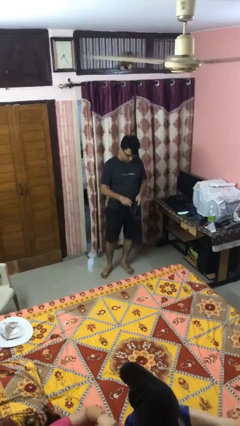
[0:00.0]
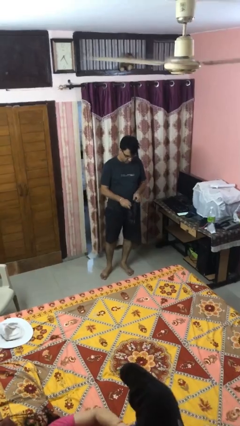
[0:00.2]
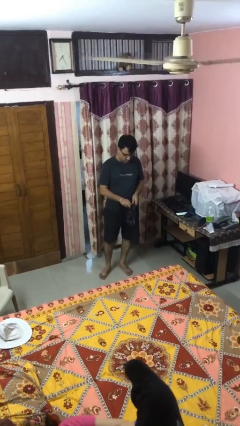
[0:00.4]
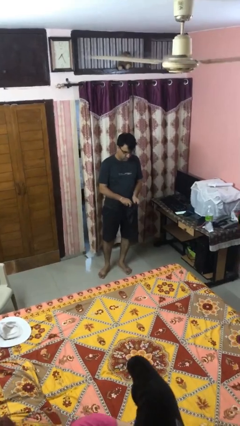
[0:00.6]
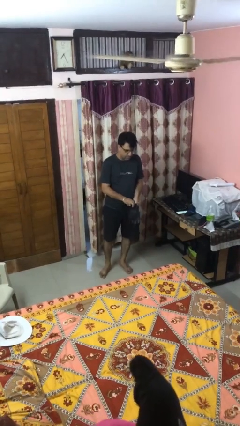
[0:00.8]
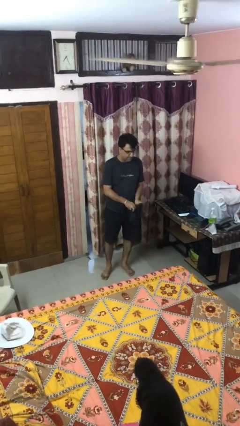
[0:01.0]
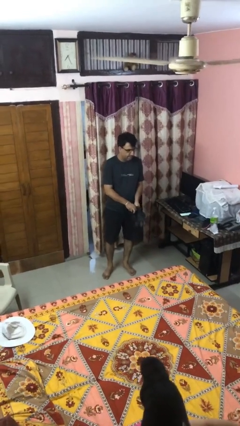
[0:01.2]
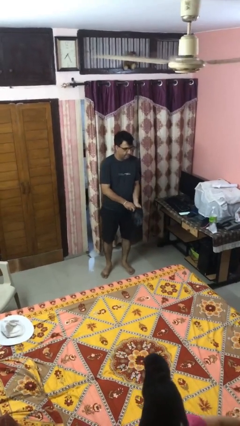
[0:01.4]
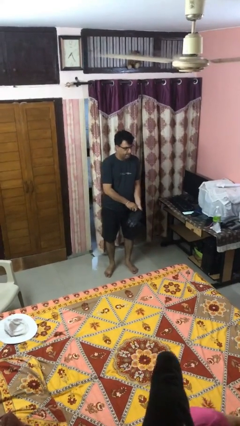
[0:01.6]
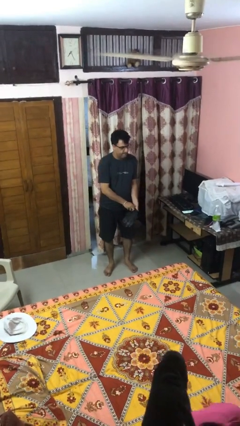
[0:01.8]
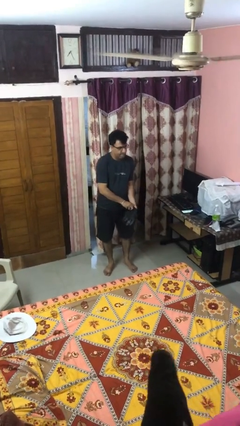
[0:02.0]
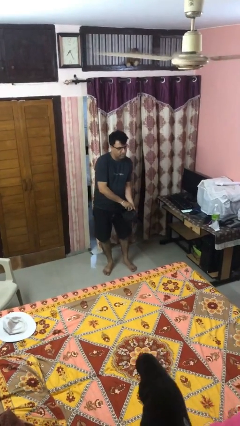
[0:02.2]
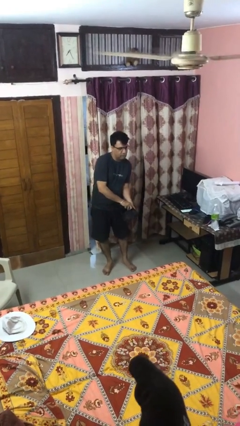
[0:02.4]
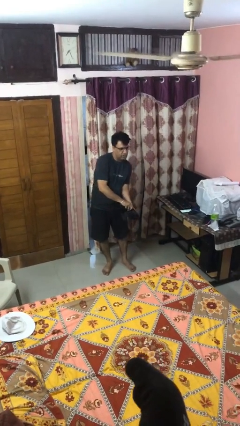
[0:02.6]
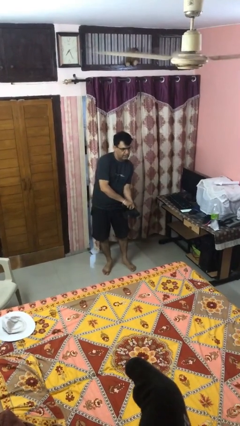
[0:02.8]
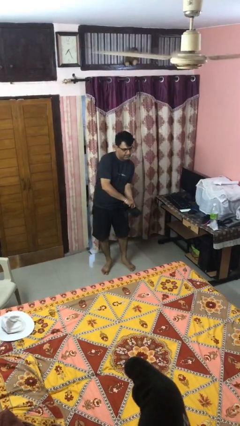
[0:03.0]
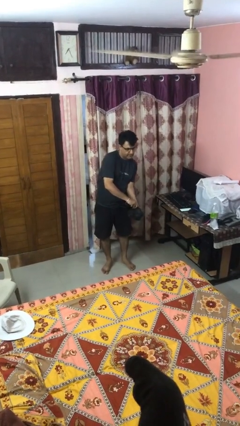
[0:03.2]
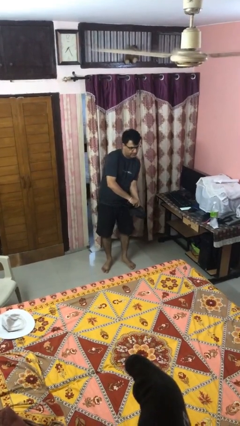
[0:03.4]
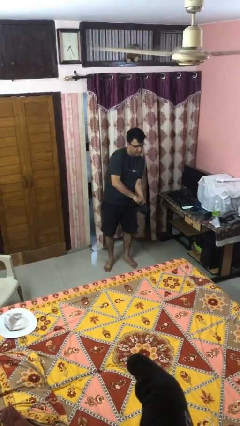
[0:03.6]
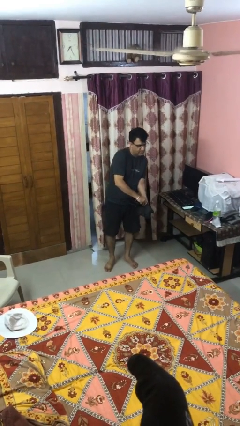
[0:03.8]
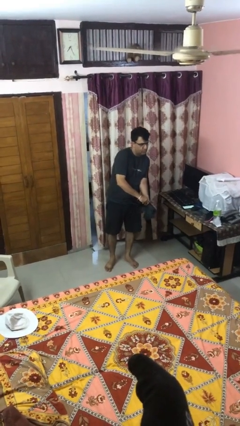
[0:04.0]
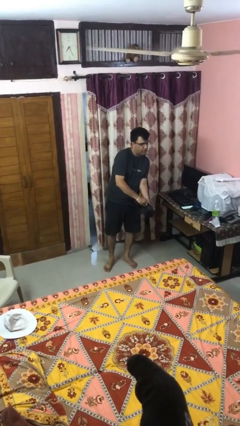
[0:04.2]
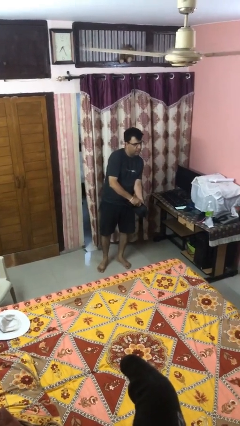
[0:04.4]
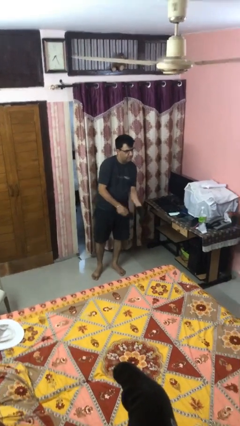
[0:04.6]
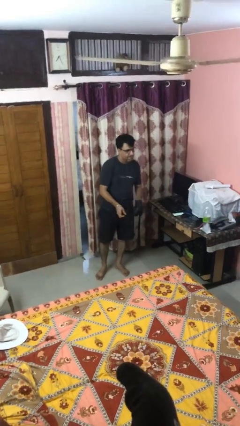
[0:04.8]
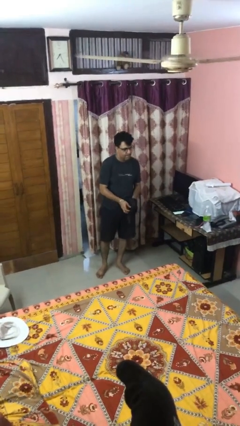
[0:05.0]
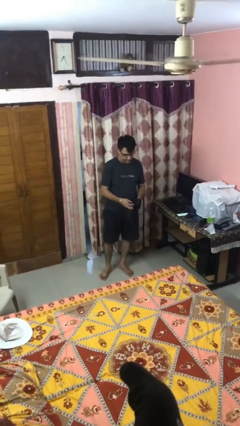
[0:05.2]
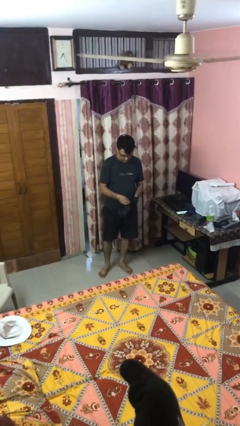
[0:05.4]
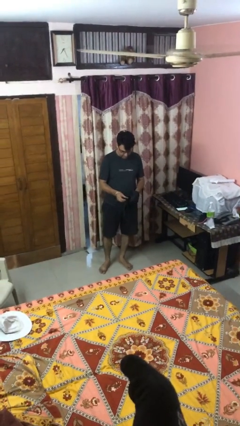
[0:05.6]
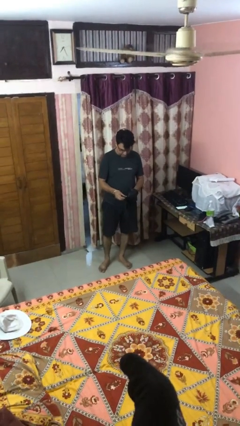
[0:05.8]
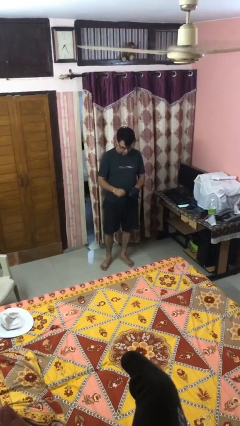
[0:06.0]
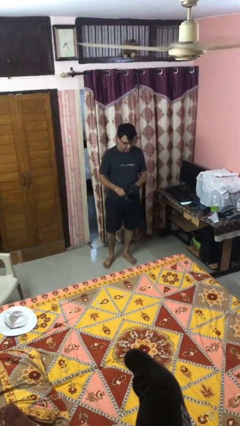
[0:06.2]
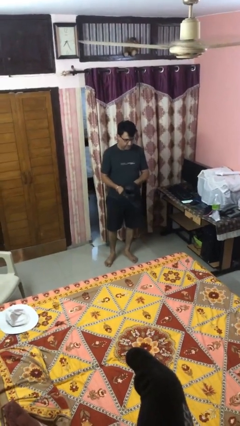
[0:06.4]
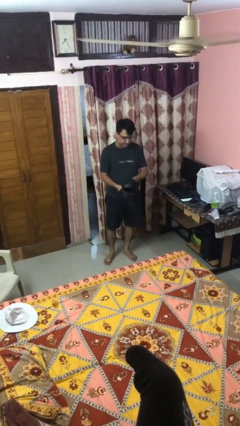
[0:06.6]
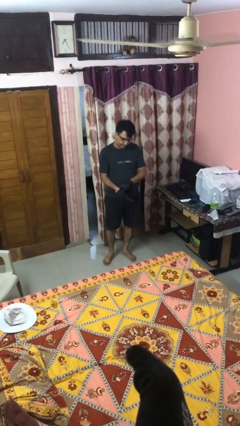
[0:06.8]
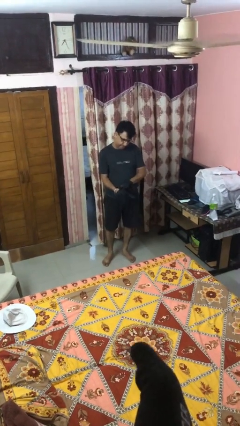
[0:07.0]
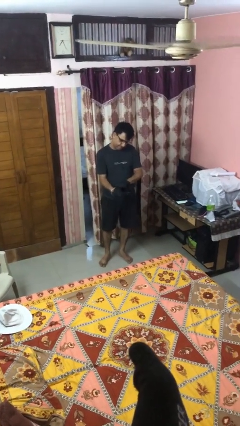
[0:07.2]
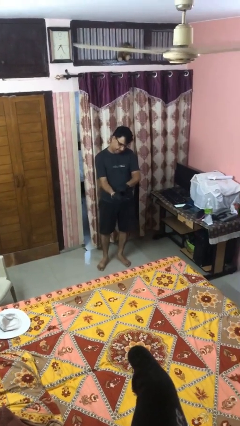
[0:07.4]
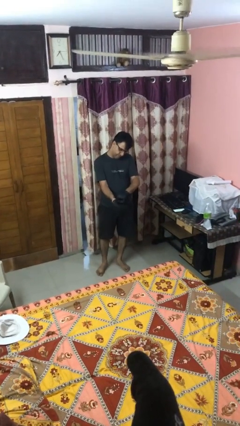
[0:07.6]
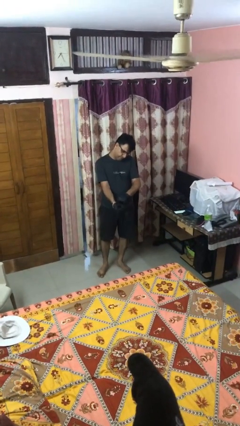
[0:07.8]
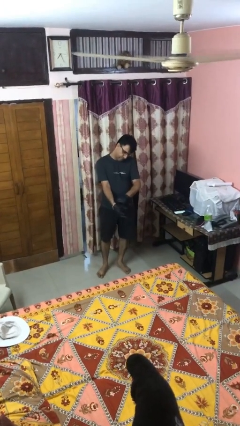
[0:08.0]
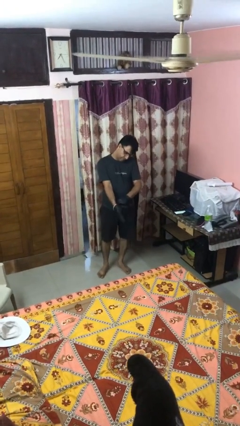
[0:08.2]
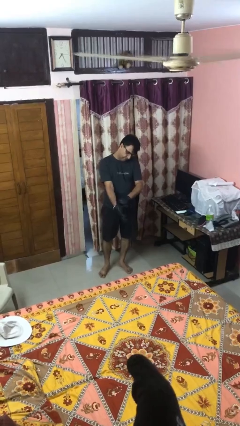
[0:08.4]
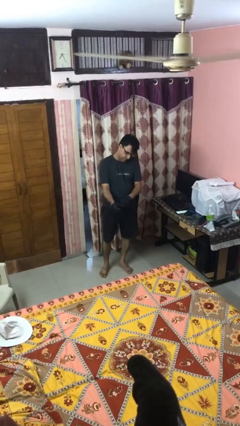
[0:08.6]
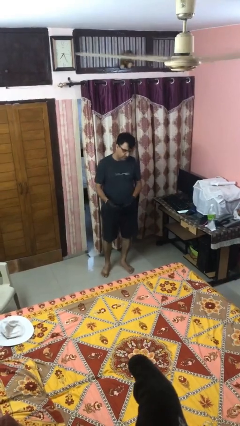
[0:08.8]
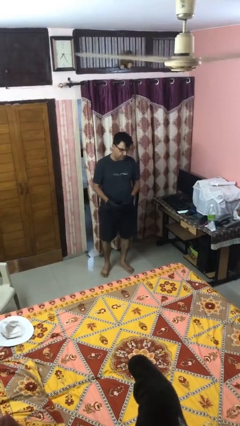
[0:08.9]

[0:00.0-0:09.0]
person puts on gloves

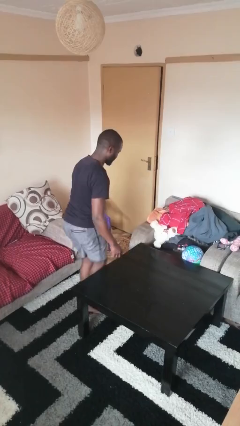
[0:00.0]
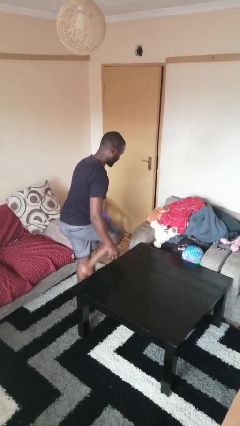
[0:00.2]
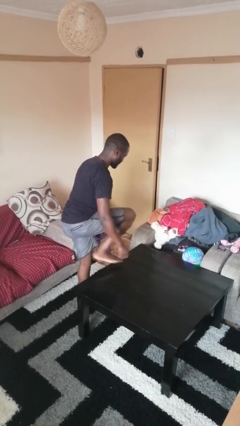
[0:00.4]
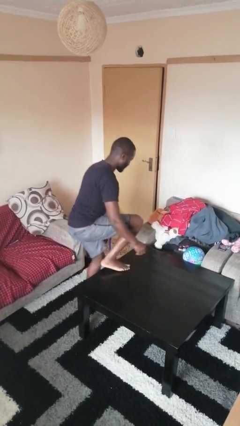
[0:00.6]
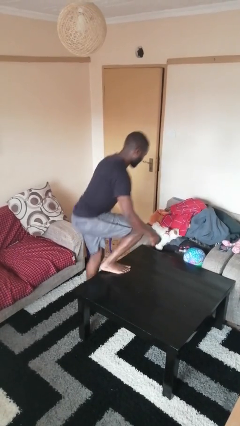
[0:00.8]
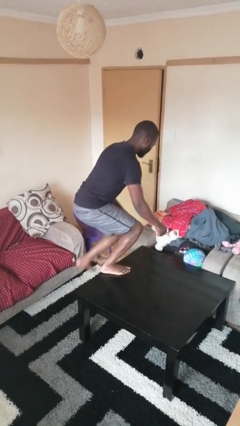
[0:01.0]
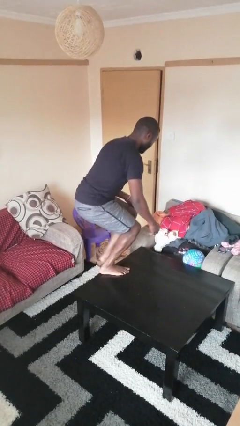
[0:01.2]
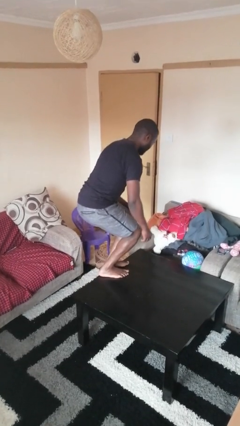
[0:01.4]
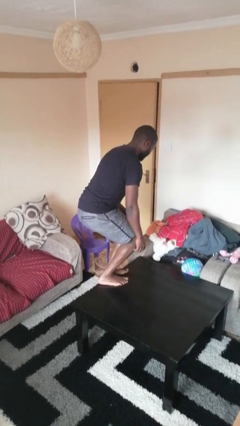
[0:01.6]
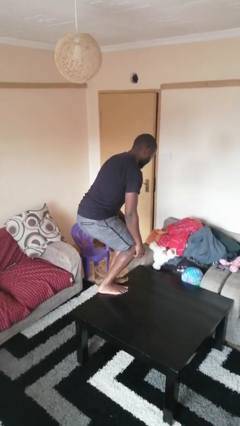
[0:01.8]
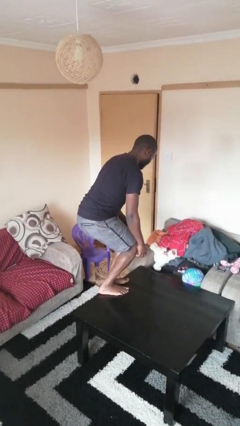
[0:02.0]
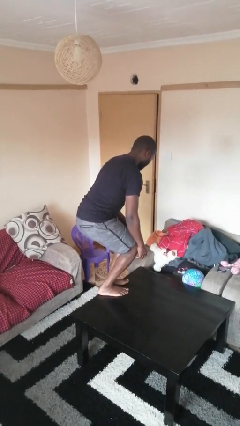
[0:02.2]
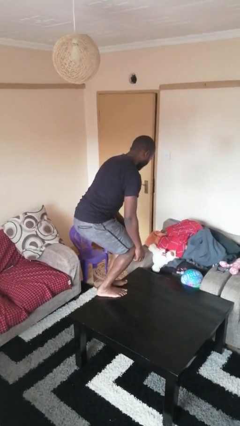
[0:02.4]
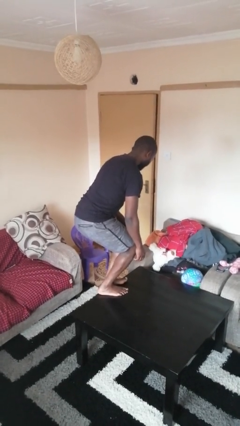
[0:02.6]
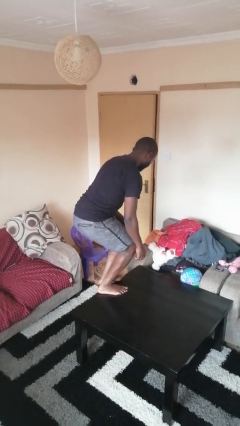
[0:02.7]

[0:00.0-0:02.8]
person climbs on table

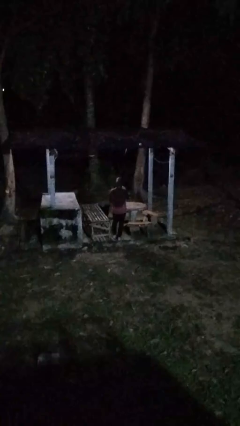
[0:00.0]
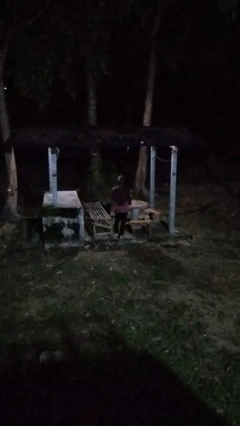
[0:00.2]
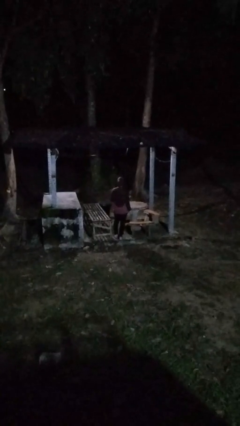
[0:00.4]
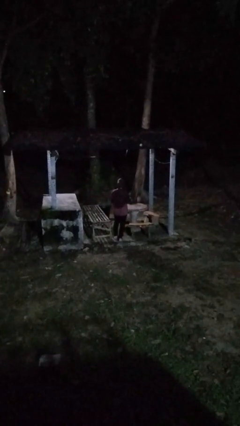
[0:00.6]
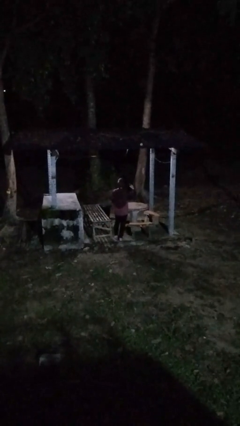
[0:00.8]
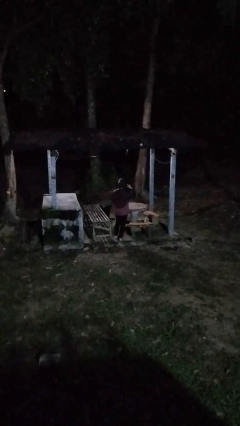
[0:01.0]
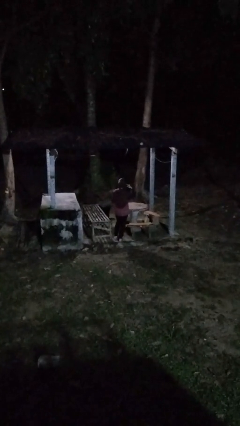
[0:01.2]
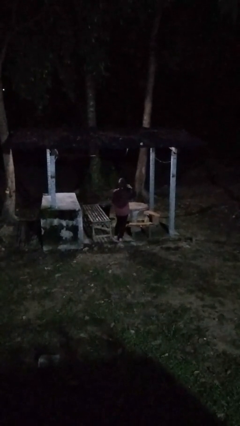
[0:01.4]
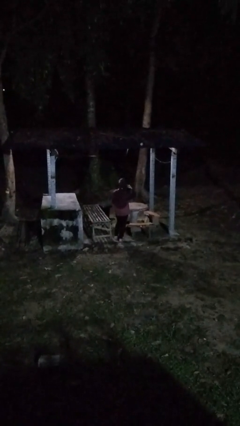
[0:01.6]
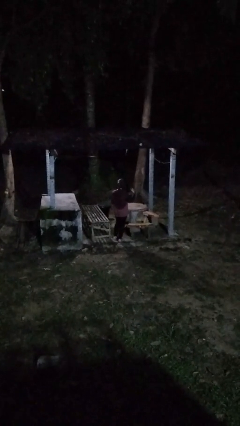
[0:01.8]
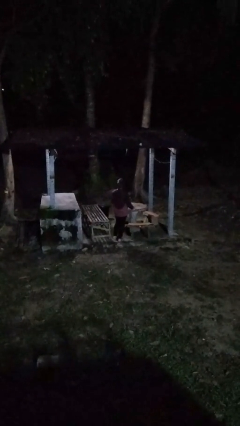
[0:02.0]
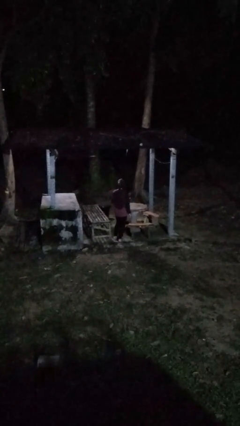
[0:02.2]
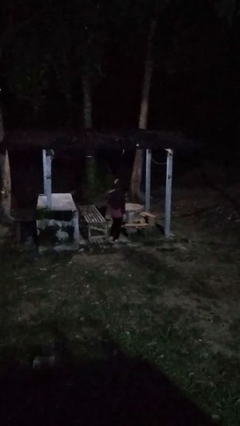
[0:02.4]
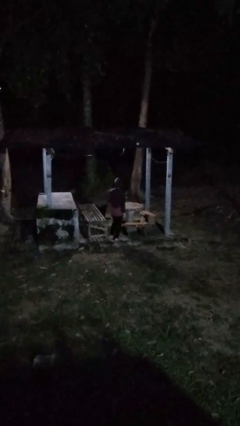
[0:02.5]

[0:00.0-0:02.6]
person gestures listen closely

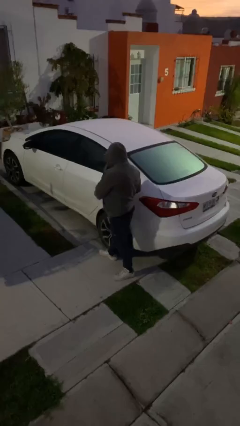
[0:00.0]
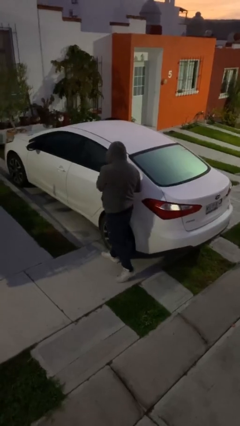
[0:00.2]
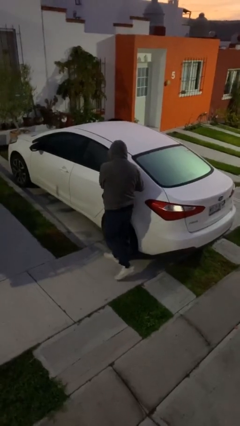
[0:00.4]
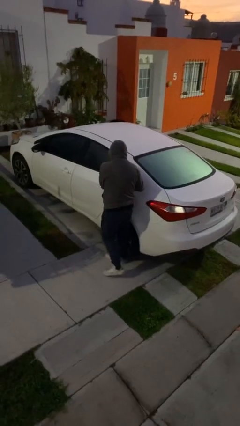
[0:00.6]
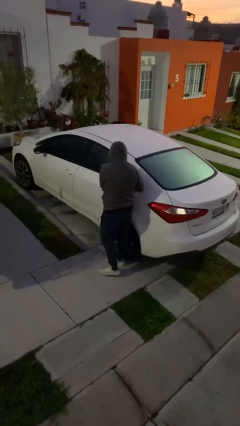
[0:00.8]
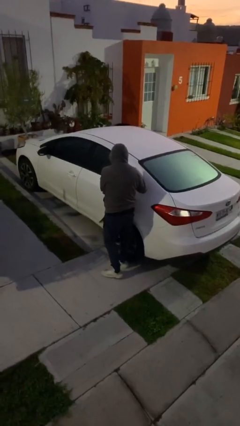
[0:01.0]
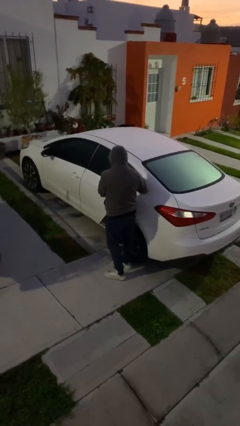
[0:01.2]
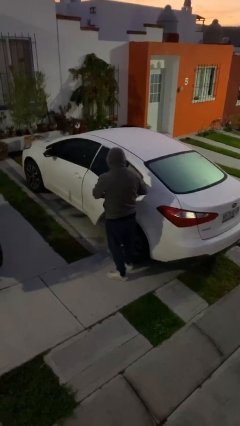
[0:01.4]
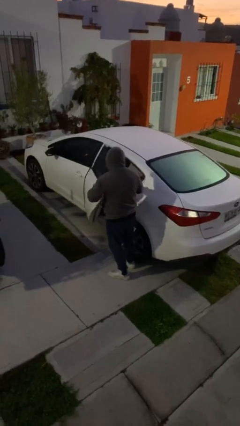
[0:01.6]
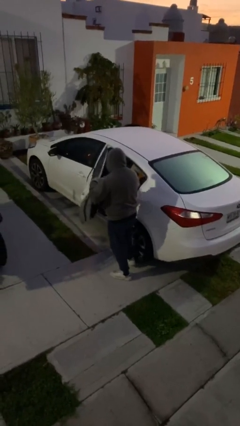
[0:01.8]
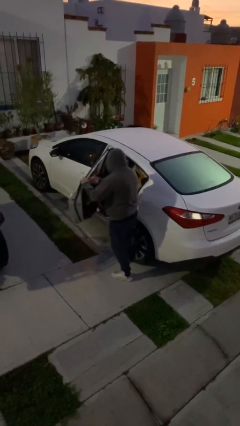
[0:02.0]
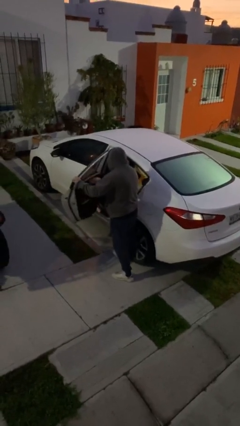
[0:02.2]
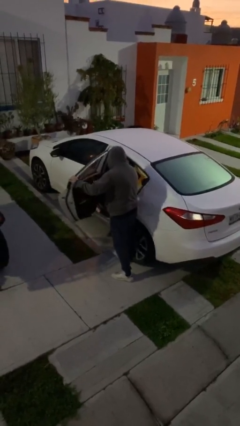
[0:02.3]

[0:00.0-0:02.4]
person opens car door

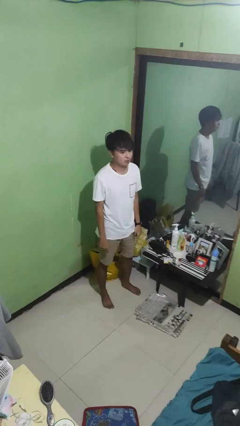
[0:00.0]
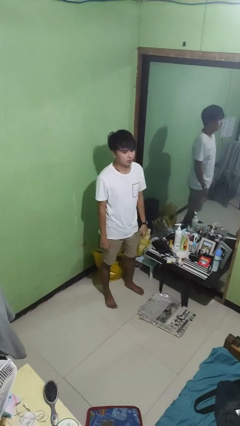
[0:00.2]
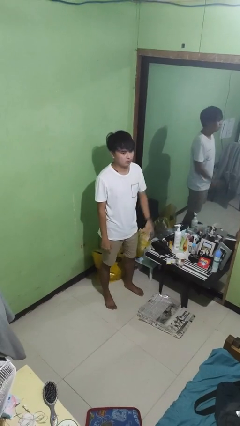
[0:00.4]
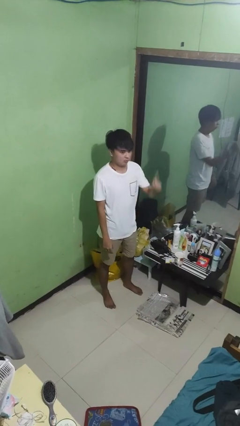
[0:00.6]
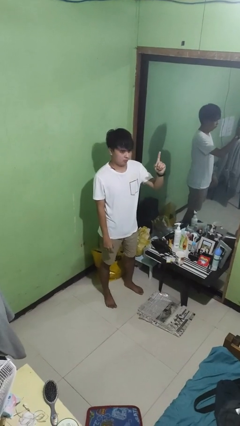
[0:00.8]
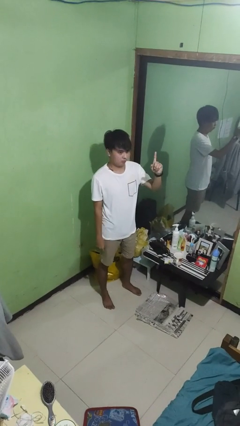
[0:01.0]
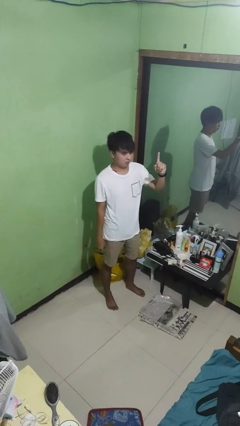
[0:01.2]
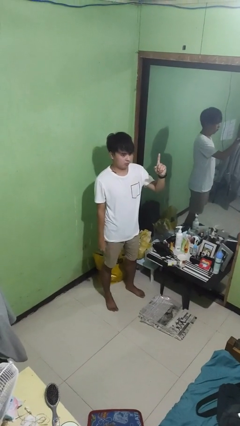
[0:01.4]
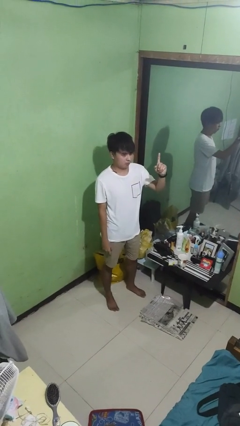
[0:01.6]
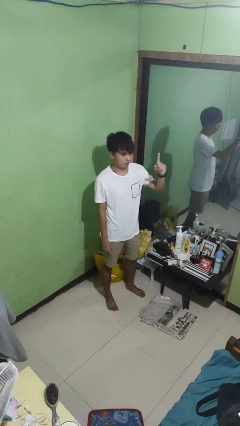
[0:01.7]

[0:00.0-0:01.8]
person gestures number one
